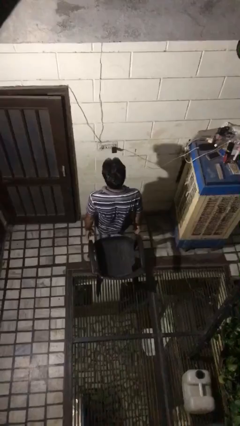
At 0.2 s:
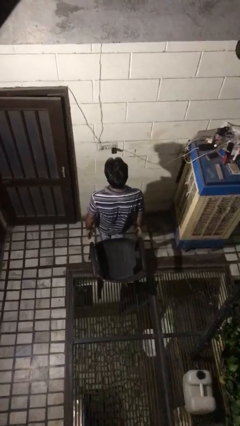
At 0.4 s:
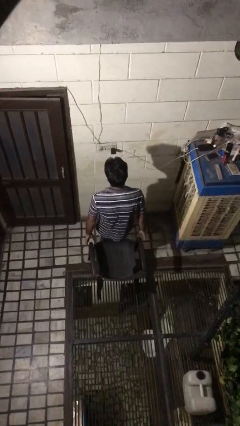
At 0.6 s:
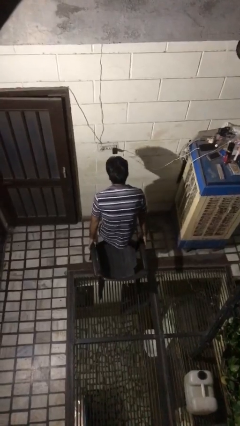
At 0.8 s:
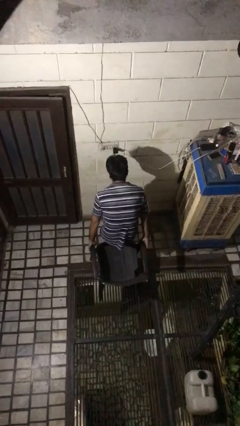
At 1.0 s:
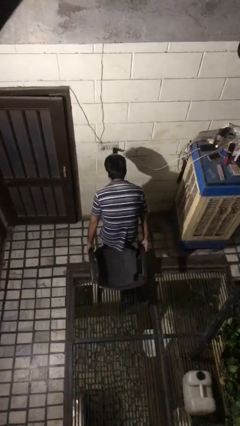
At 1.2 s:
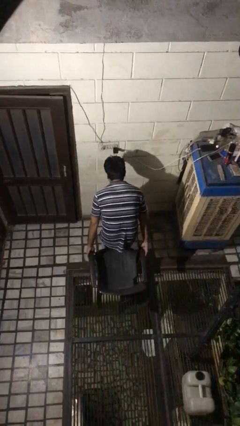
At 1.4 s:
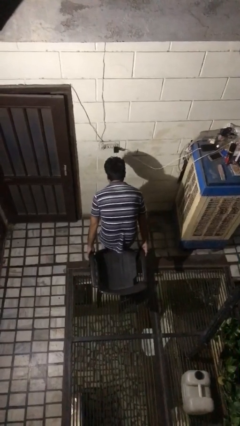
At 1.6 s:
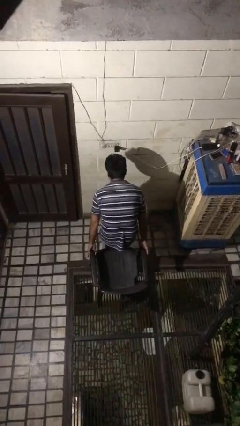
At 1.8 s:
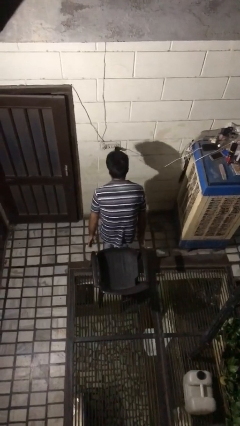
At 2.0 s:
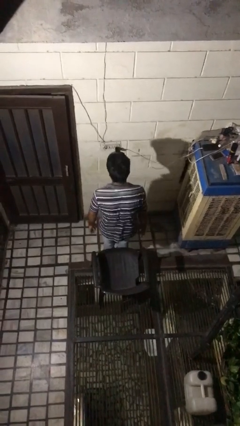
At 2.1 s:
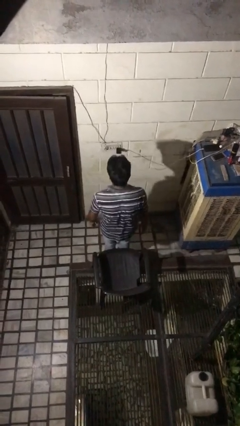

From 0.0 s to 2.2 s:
person pushes in chair

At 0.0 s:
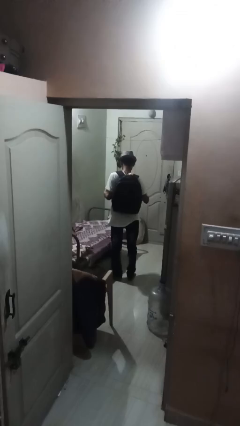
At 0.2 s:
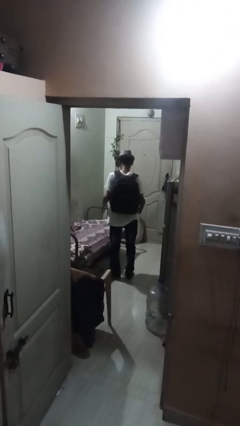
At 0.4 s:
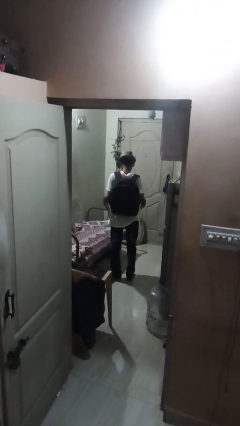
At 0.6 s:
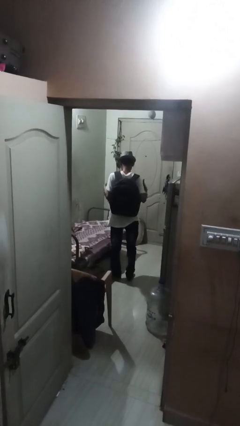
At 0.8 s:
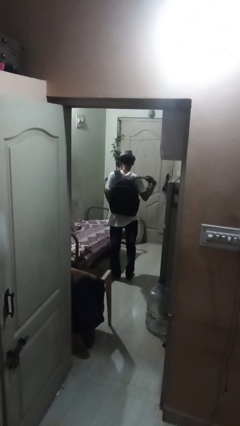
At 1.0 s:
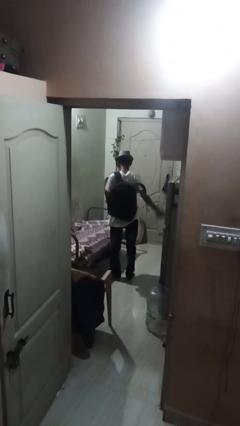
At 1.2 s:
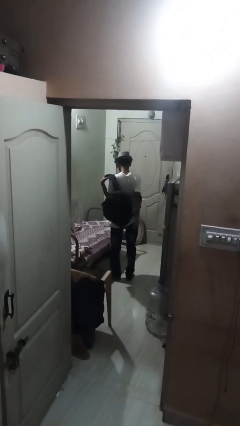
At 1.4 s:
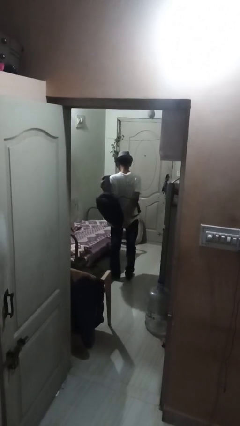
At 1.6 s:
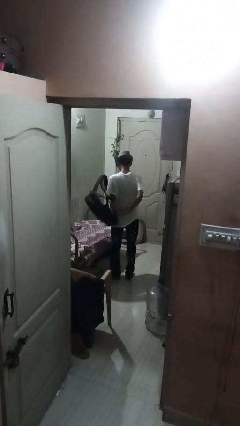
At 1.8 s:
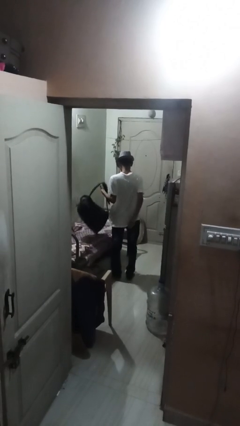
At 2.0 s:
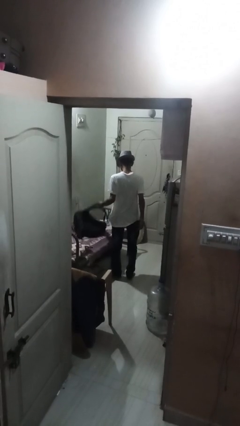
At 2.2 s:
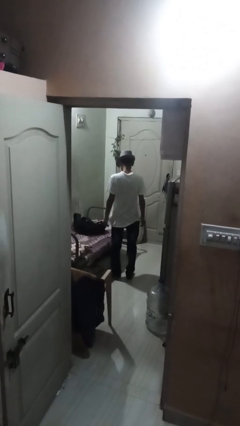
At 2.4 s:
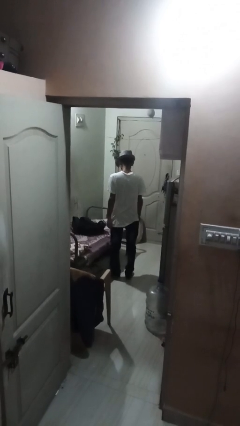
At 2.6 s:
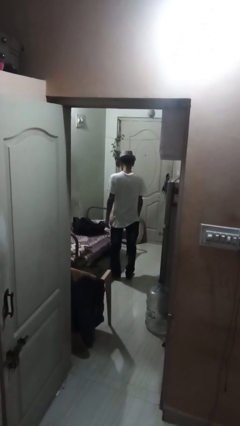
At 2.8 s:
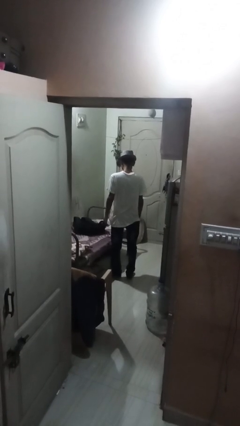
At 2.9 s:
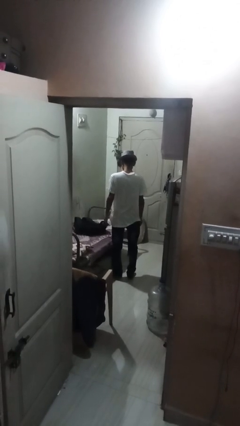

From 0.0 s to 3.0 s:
person takes off backpack

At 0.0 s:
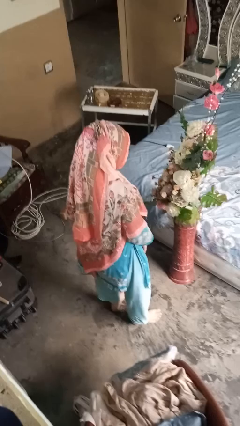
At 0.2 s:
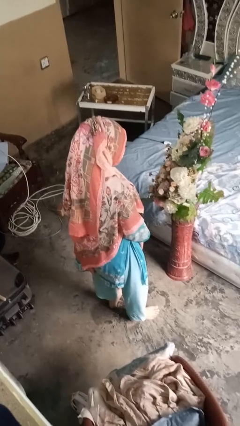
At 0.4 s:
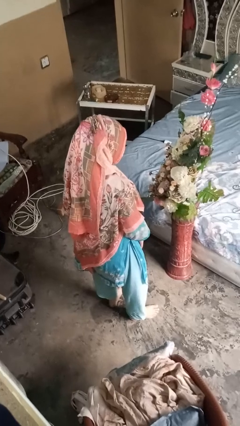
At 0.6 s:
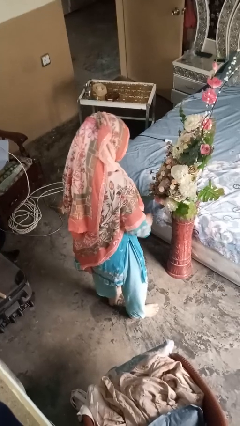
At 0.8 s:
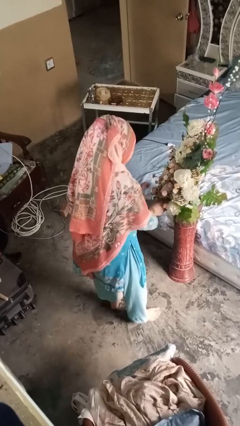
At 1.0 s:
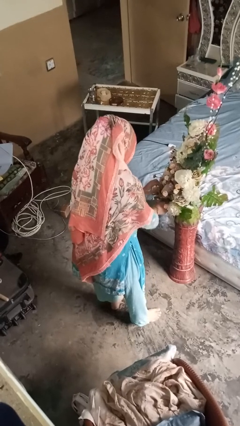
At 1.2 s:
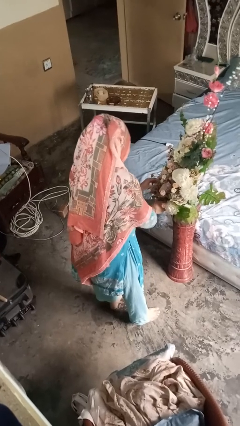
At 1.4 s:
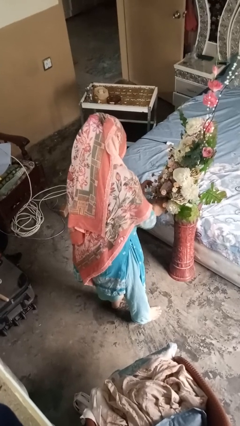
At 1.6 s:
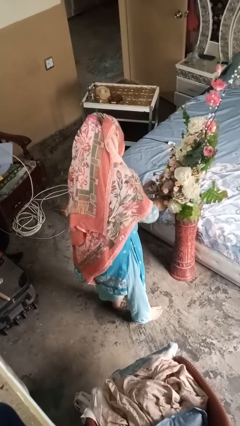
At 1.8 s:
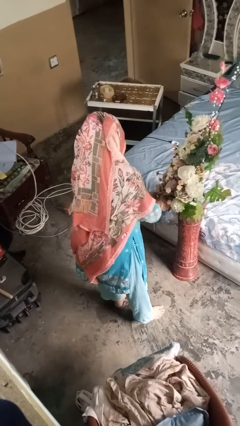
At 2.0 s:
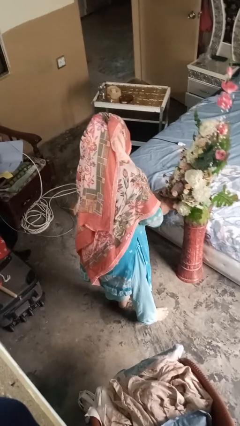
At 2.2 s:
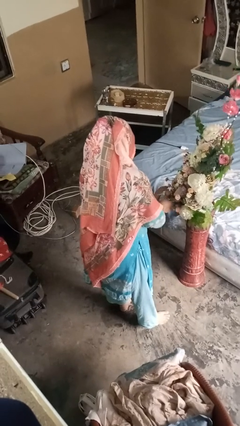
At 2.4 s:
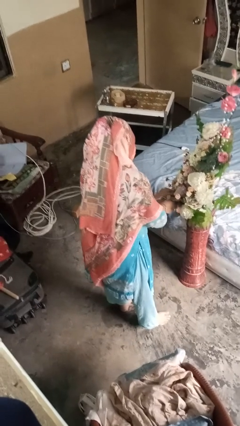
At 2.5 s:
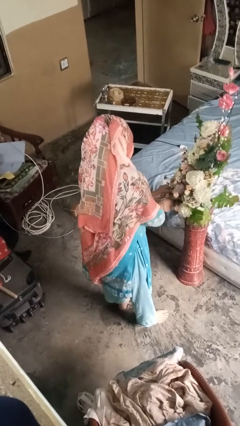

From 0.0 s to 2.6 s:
person arranges flowers in vase

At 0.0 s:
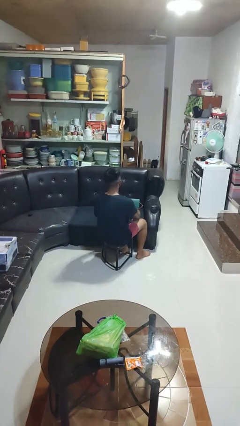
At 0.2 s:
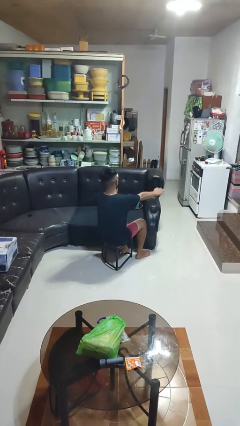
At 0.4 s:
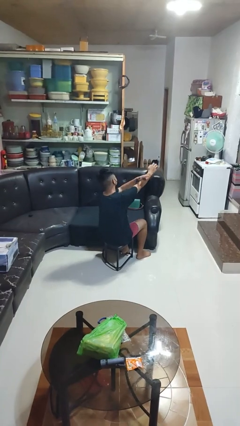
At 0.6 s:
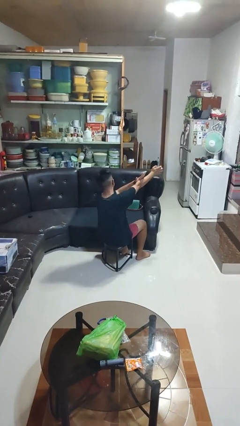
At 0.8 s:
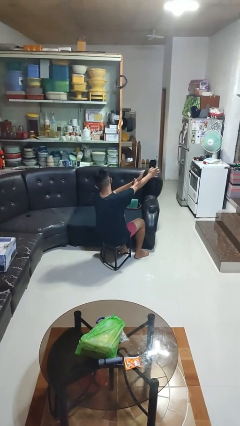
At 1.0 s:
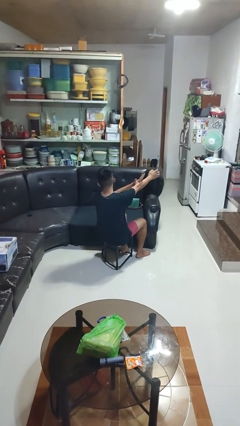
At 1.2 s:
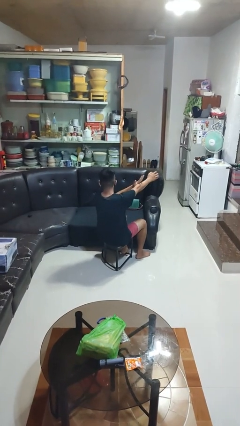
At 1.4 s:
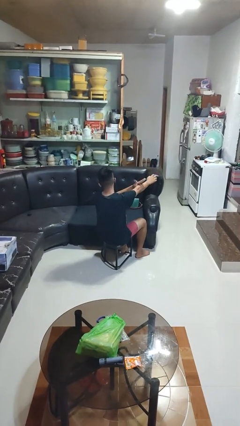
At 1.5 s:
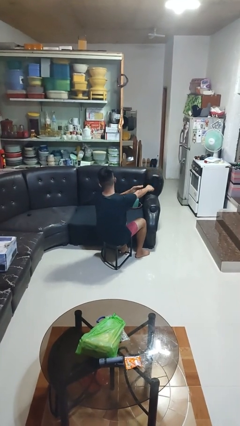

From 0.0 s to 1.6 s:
person swats bug

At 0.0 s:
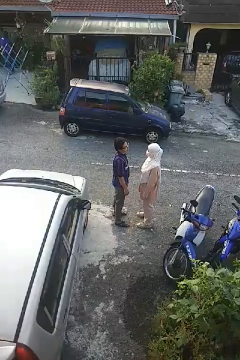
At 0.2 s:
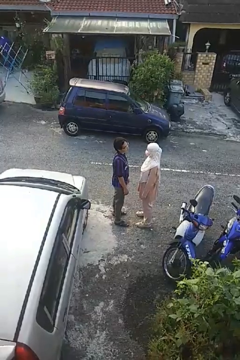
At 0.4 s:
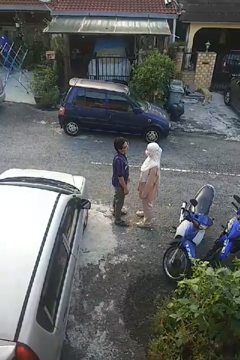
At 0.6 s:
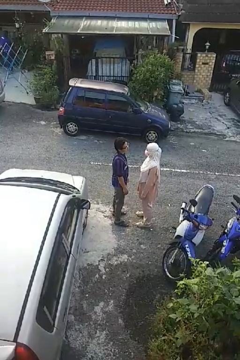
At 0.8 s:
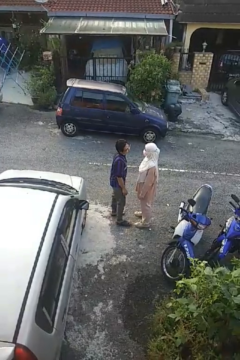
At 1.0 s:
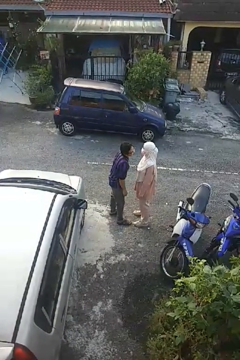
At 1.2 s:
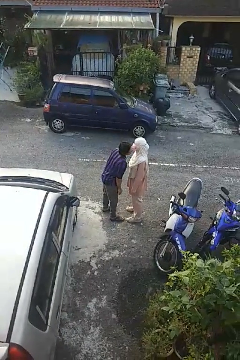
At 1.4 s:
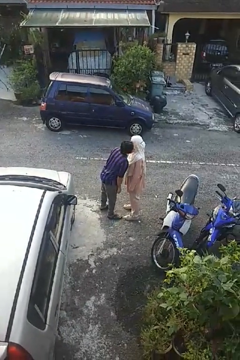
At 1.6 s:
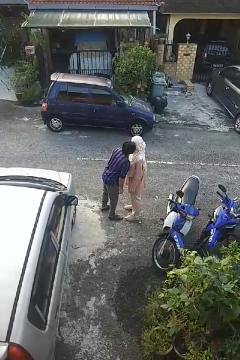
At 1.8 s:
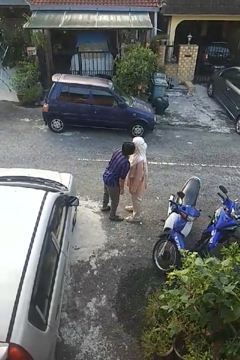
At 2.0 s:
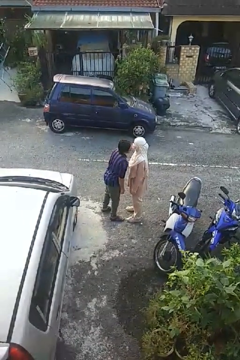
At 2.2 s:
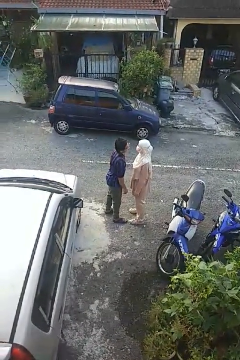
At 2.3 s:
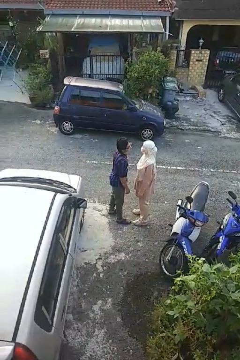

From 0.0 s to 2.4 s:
person kisses cheek of person

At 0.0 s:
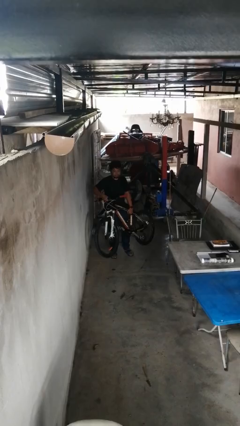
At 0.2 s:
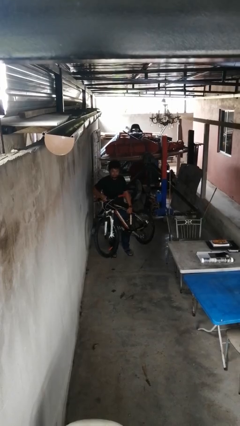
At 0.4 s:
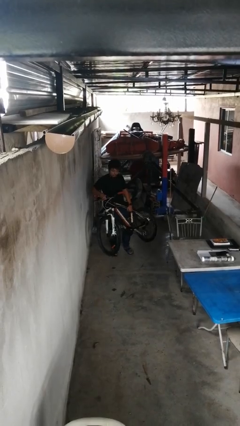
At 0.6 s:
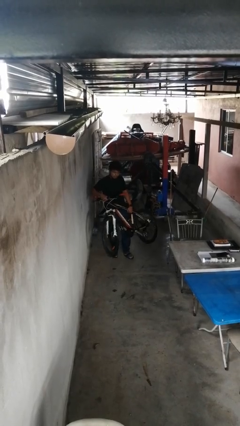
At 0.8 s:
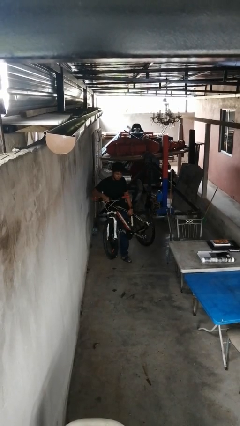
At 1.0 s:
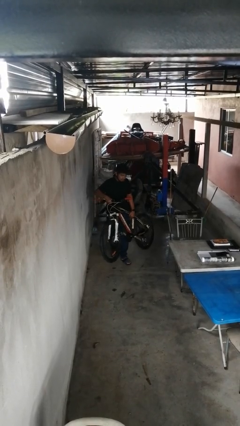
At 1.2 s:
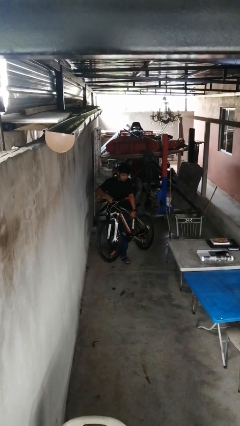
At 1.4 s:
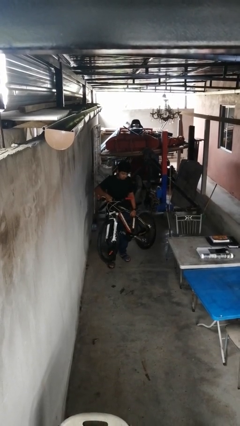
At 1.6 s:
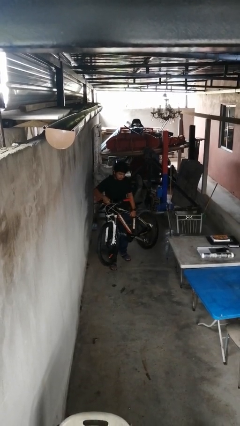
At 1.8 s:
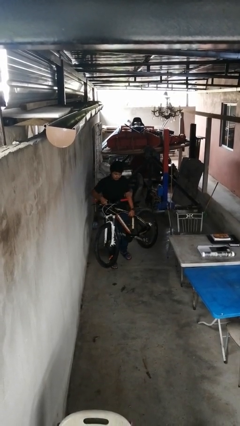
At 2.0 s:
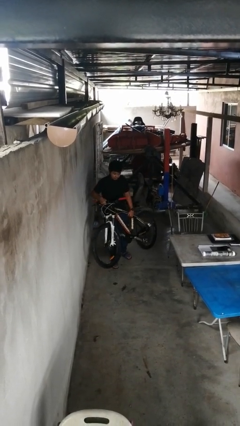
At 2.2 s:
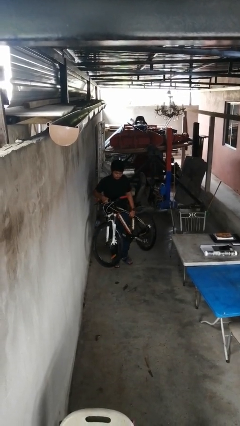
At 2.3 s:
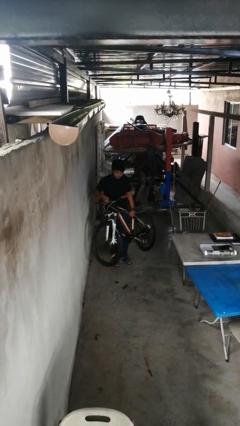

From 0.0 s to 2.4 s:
person carries bicycle

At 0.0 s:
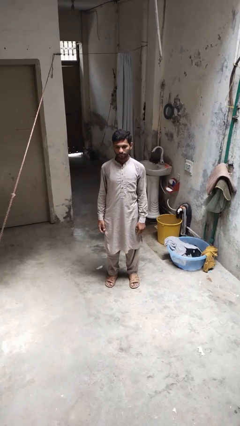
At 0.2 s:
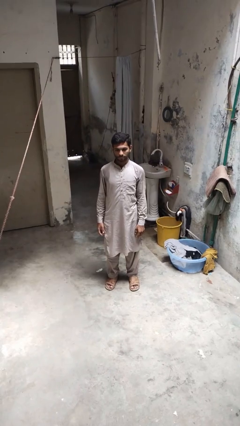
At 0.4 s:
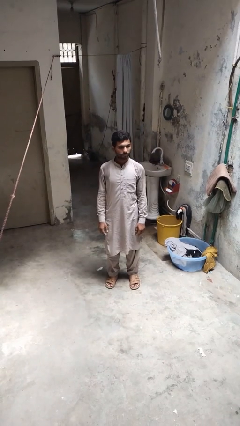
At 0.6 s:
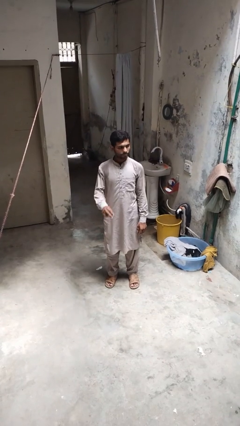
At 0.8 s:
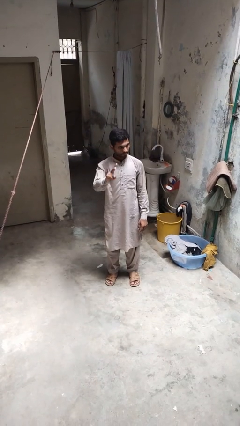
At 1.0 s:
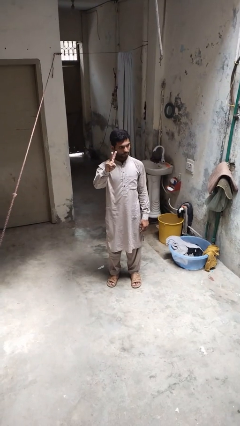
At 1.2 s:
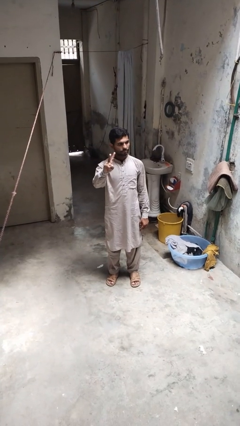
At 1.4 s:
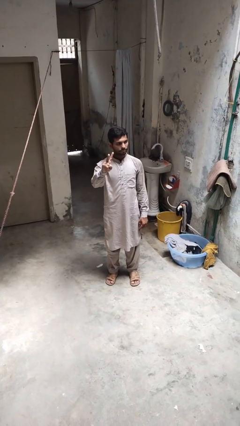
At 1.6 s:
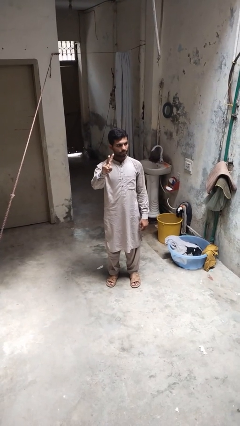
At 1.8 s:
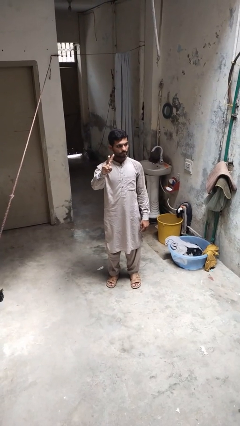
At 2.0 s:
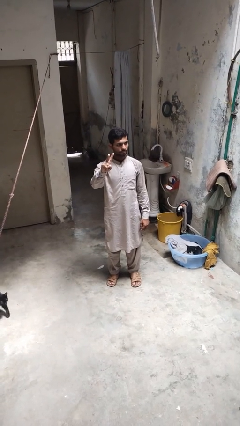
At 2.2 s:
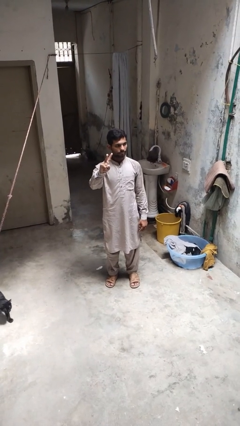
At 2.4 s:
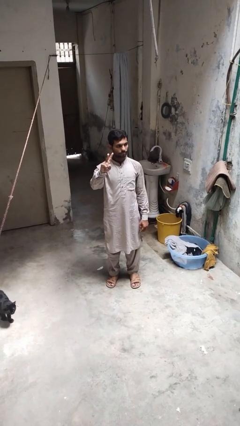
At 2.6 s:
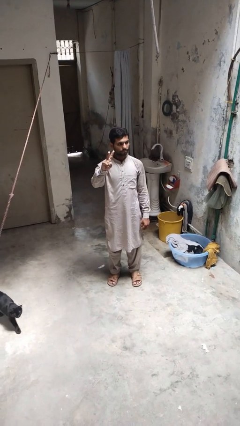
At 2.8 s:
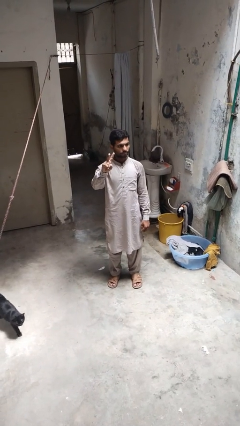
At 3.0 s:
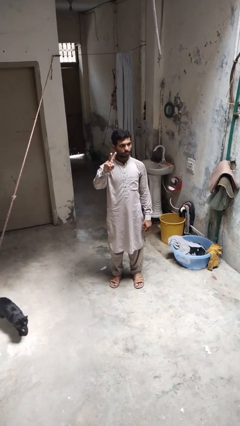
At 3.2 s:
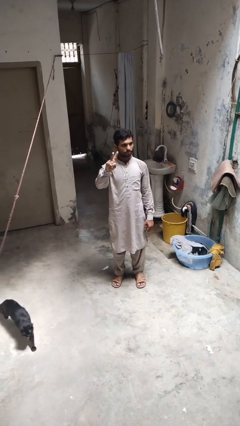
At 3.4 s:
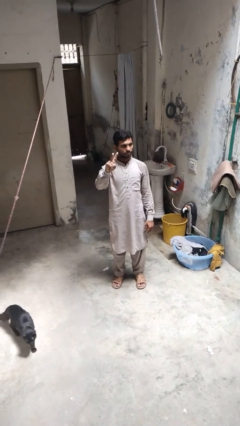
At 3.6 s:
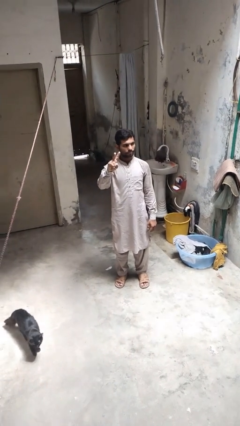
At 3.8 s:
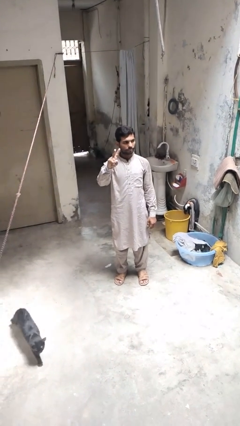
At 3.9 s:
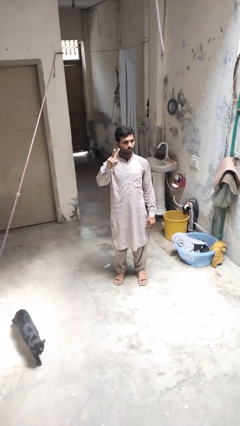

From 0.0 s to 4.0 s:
person gestures peace
